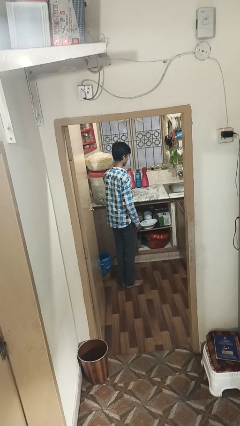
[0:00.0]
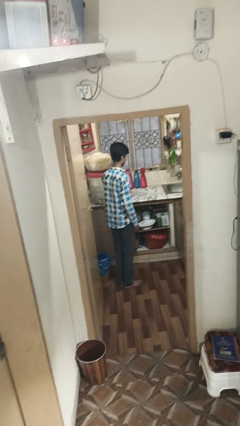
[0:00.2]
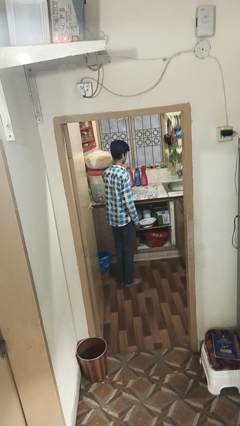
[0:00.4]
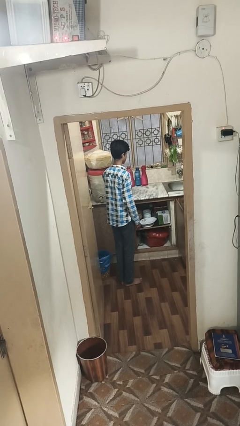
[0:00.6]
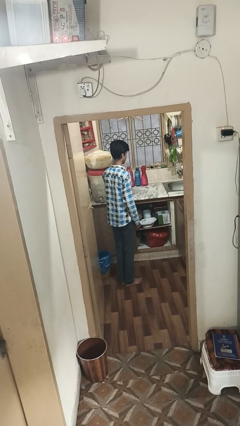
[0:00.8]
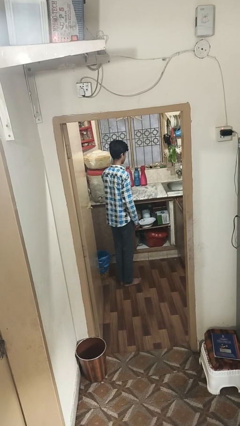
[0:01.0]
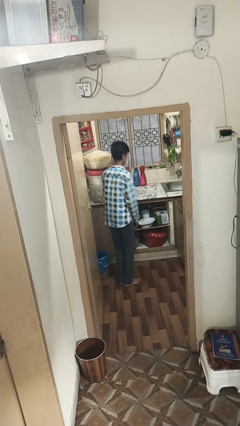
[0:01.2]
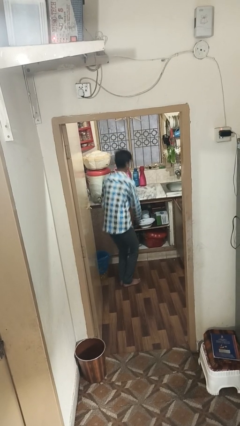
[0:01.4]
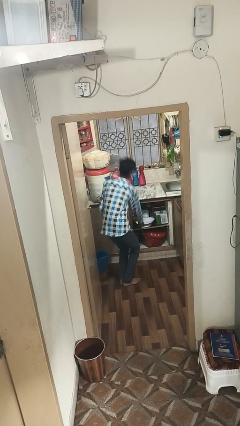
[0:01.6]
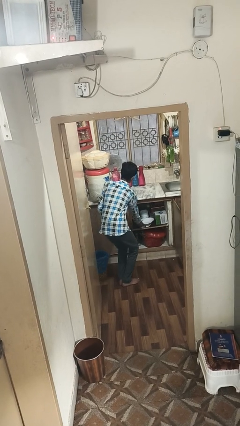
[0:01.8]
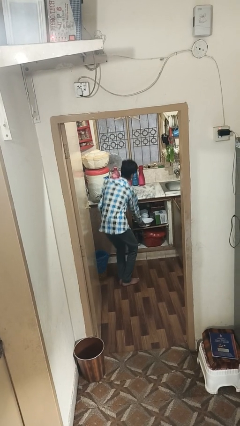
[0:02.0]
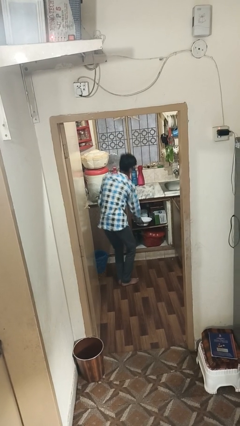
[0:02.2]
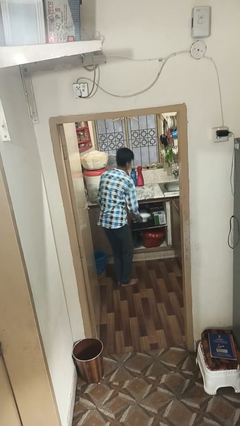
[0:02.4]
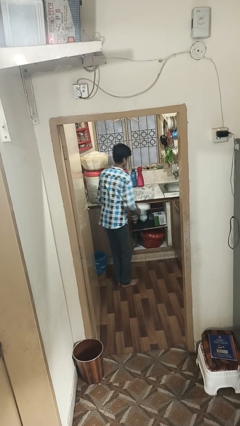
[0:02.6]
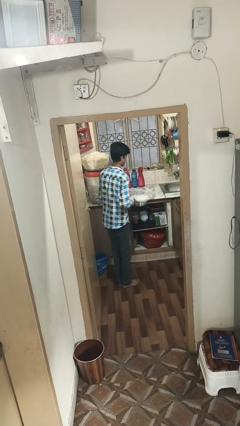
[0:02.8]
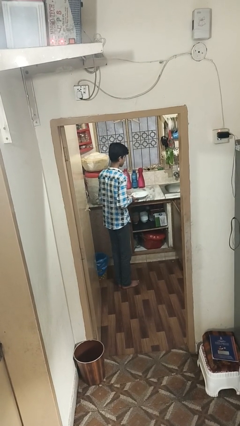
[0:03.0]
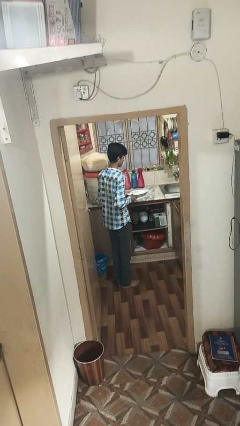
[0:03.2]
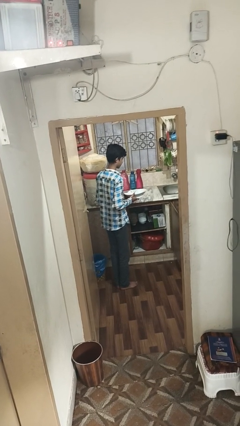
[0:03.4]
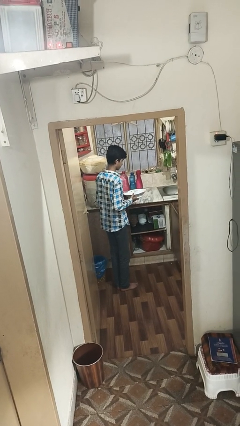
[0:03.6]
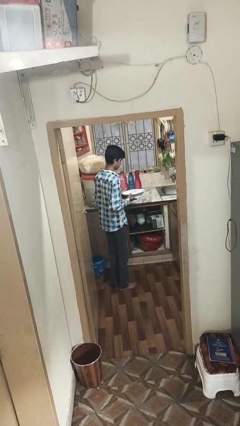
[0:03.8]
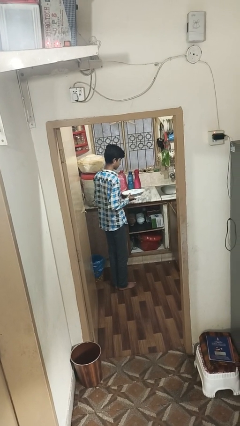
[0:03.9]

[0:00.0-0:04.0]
person picks up object from cabinet

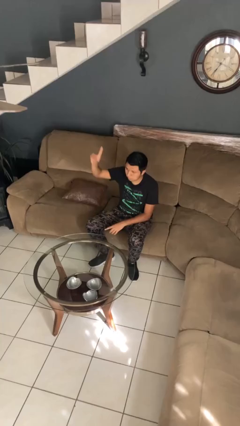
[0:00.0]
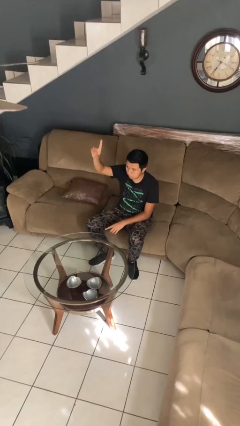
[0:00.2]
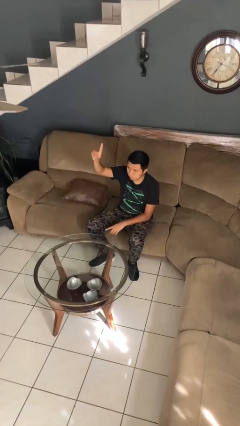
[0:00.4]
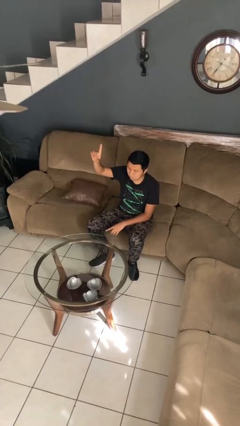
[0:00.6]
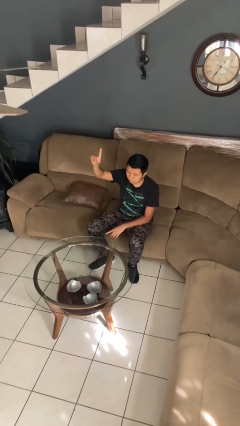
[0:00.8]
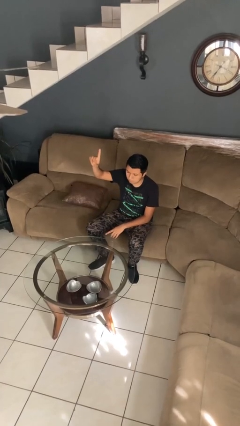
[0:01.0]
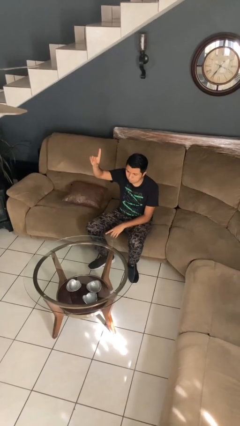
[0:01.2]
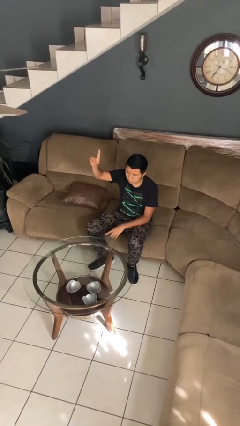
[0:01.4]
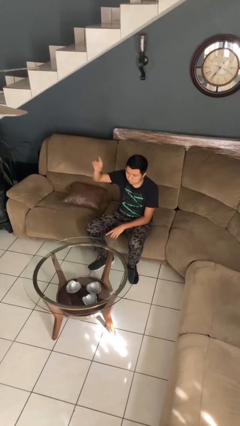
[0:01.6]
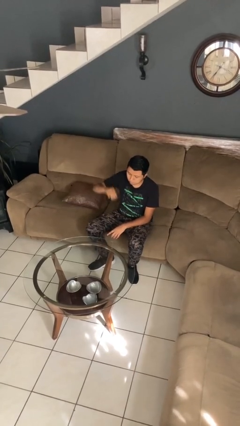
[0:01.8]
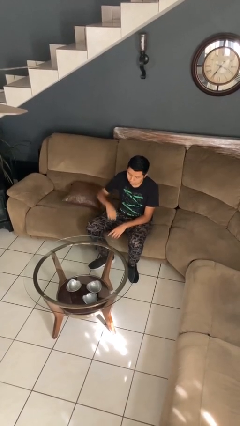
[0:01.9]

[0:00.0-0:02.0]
person gestures number one

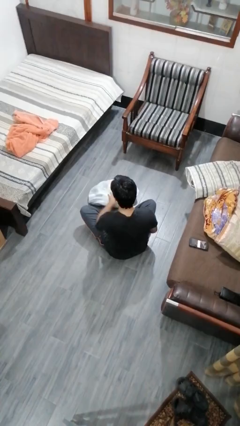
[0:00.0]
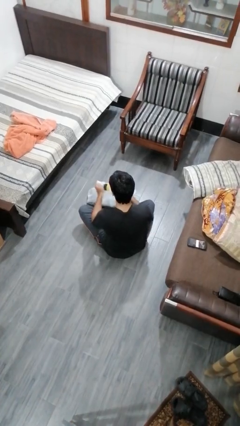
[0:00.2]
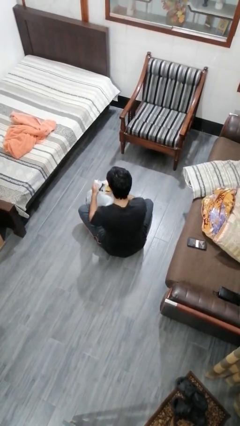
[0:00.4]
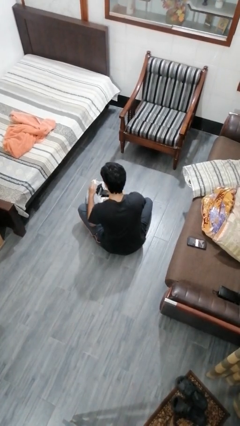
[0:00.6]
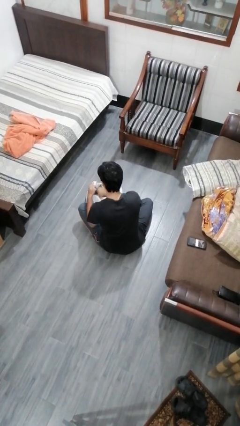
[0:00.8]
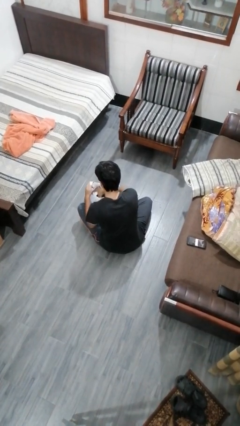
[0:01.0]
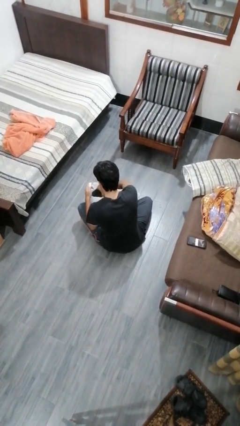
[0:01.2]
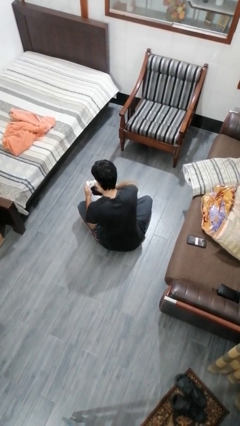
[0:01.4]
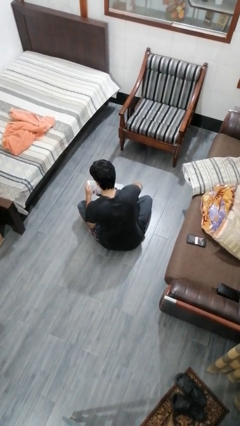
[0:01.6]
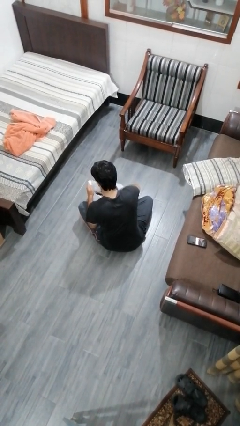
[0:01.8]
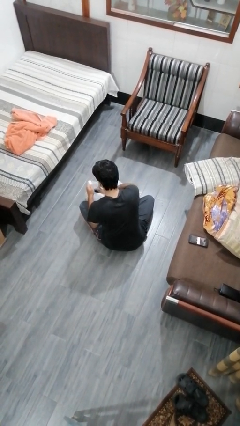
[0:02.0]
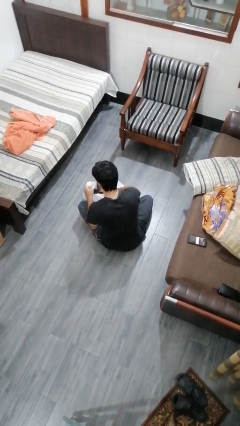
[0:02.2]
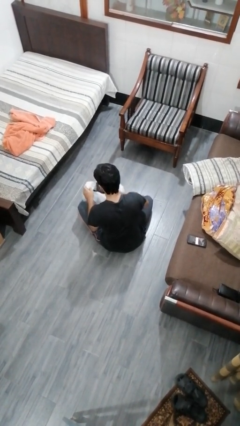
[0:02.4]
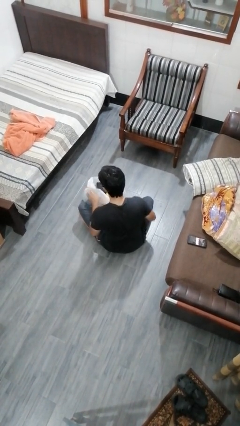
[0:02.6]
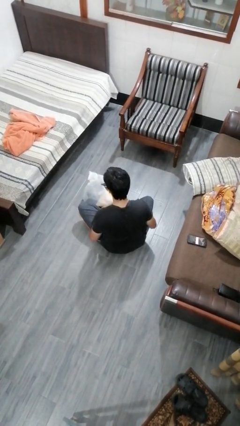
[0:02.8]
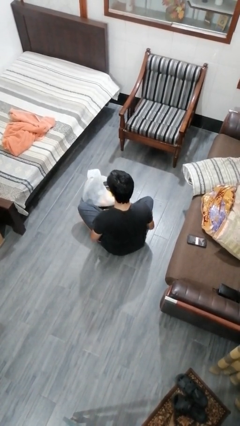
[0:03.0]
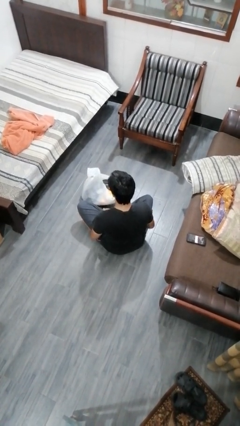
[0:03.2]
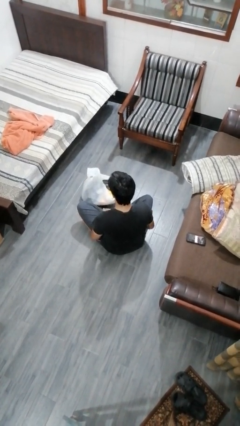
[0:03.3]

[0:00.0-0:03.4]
person searches in bag

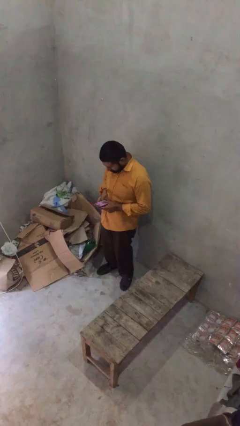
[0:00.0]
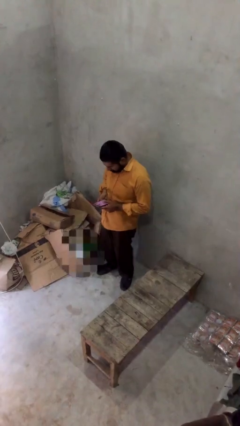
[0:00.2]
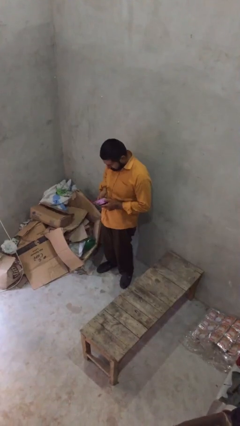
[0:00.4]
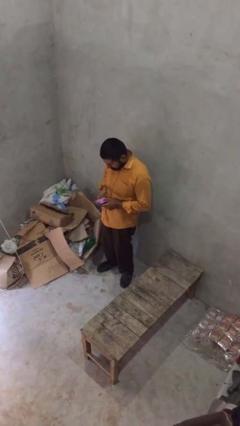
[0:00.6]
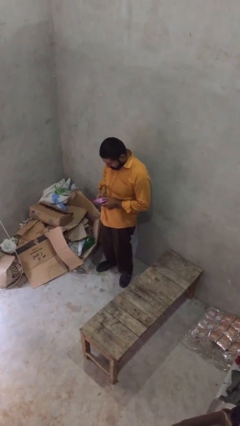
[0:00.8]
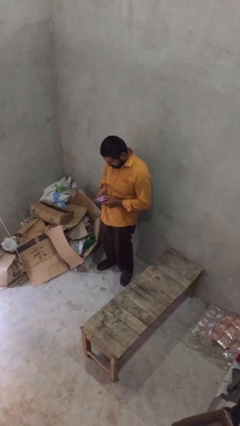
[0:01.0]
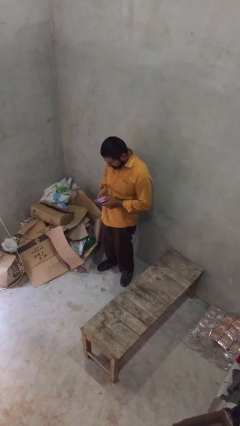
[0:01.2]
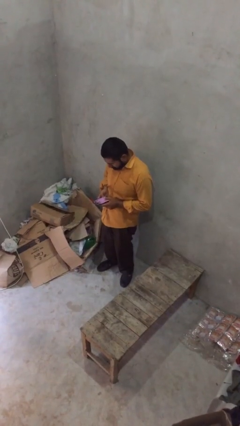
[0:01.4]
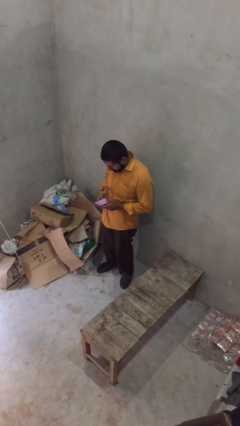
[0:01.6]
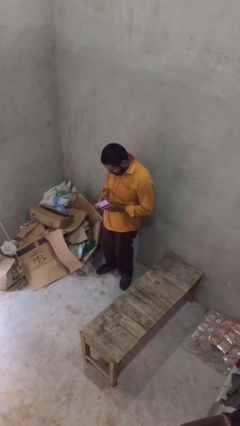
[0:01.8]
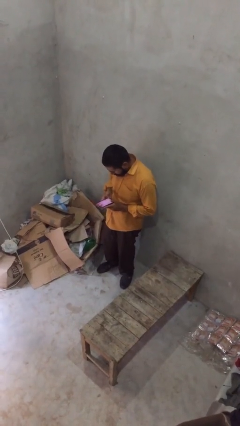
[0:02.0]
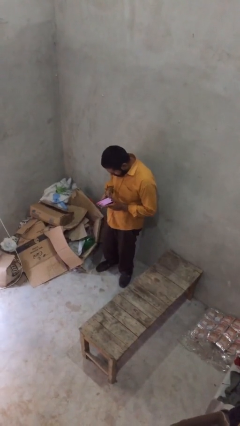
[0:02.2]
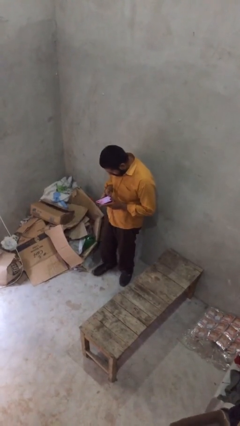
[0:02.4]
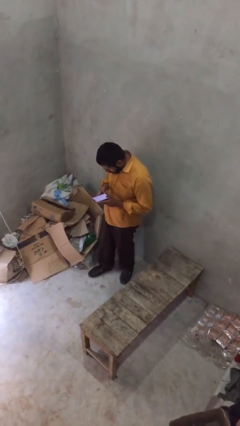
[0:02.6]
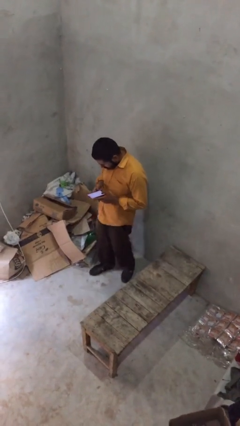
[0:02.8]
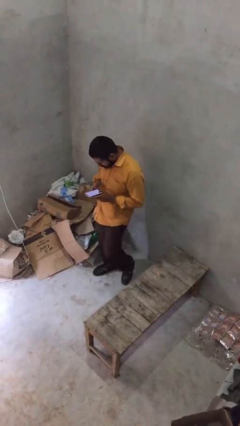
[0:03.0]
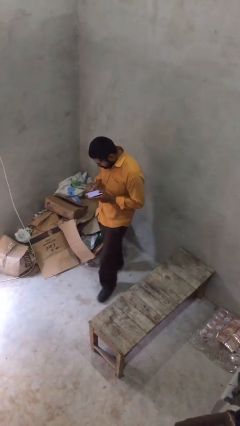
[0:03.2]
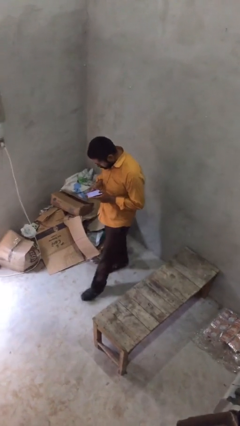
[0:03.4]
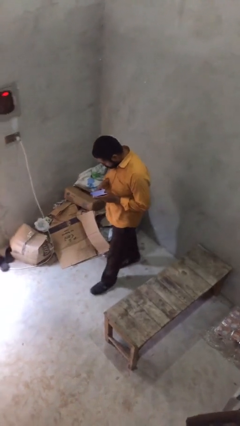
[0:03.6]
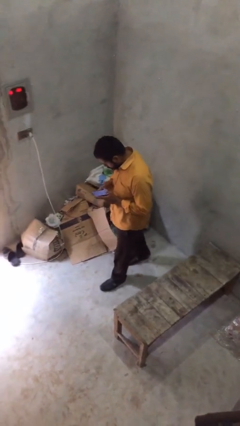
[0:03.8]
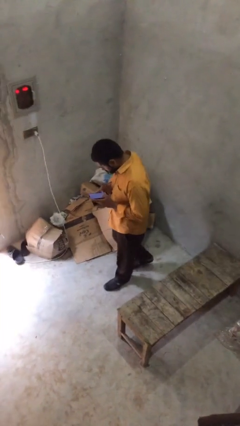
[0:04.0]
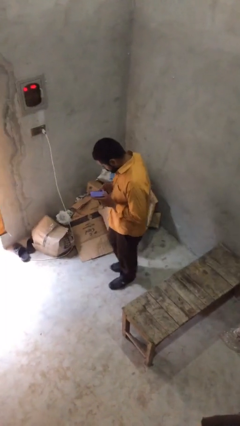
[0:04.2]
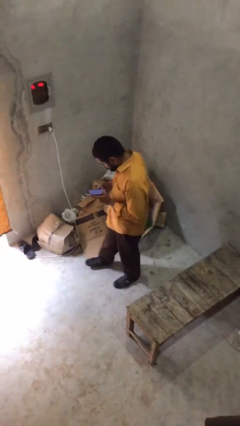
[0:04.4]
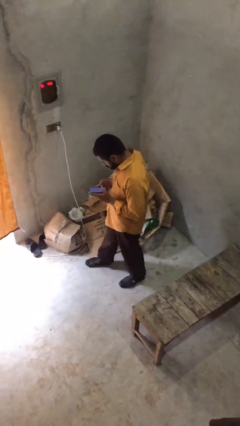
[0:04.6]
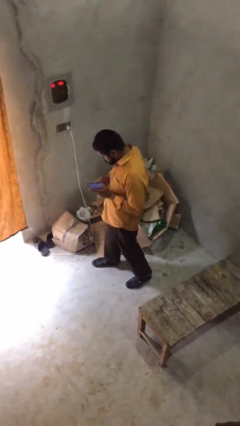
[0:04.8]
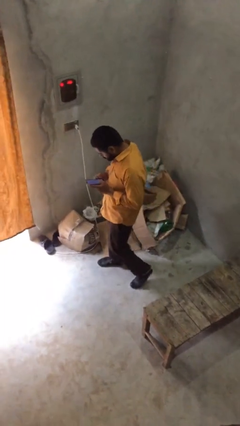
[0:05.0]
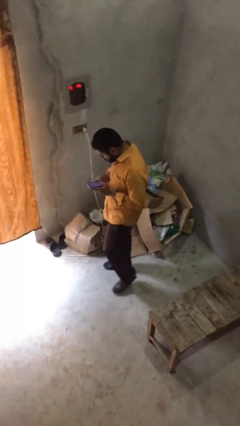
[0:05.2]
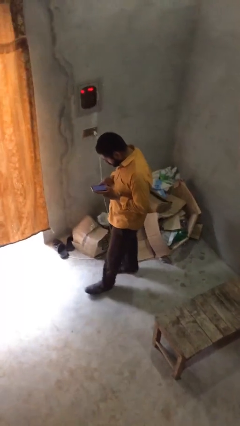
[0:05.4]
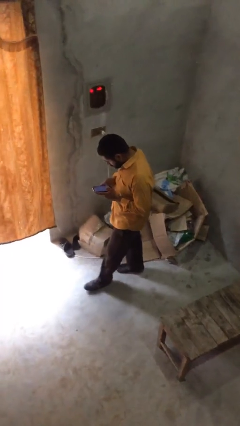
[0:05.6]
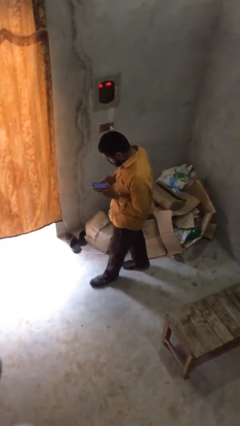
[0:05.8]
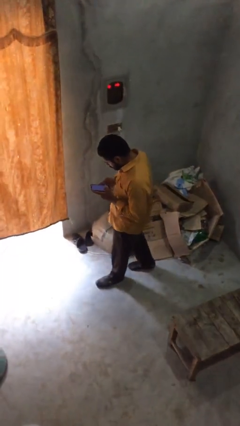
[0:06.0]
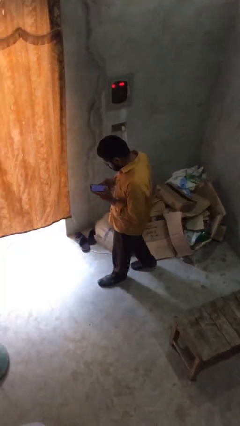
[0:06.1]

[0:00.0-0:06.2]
person texts on phone

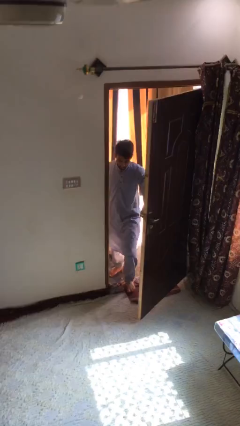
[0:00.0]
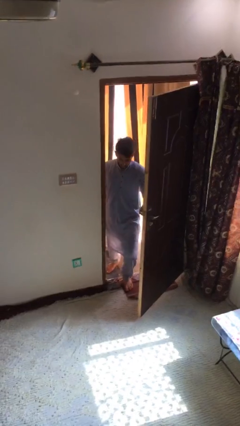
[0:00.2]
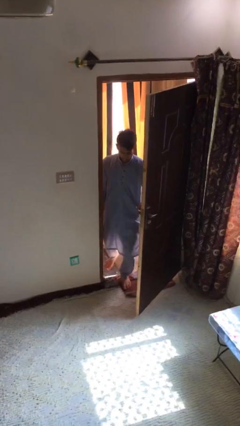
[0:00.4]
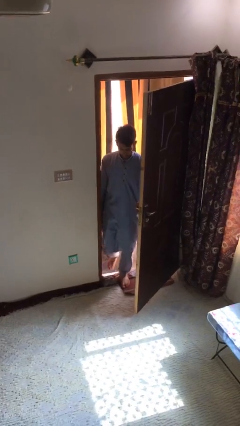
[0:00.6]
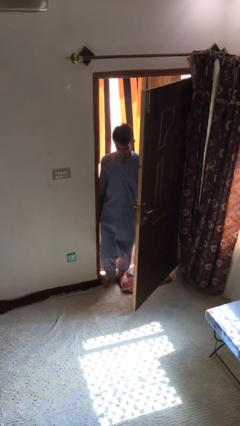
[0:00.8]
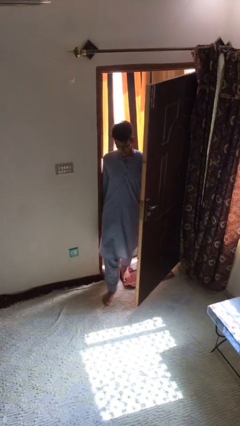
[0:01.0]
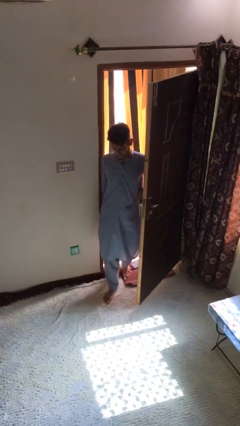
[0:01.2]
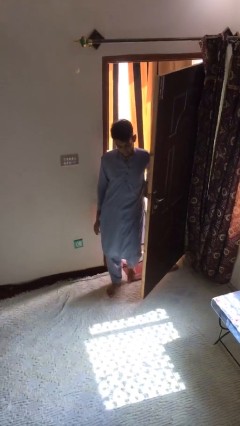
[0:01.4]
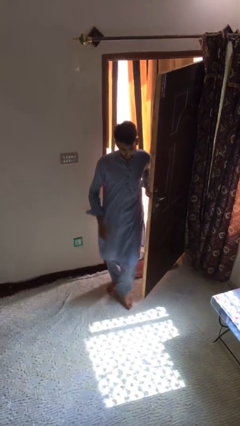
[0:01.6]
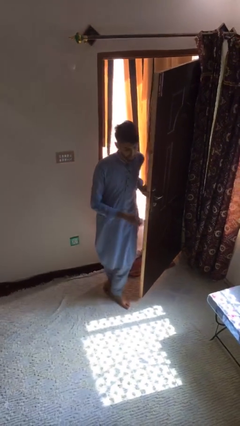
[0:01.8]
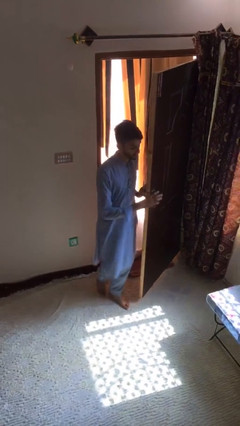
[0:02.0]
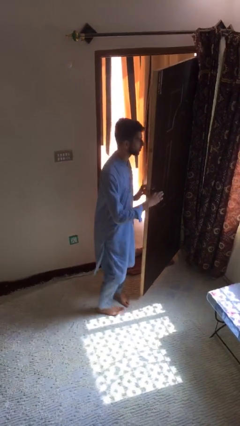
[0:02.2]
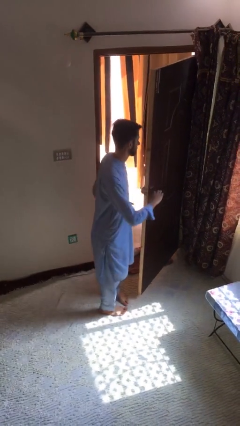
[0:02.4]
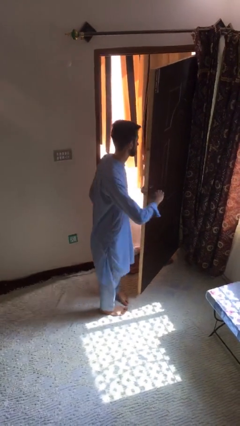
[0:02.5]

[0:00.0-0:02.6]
person enters scene through structure
